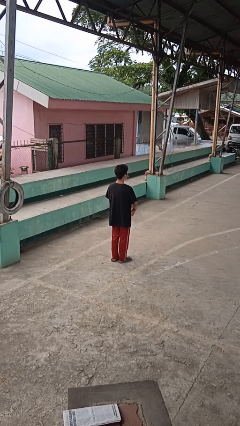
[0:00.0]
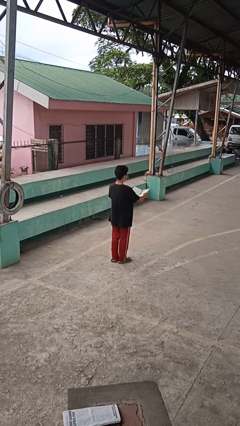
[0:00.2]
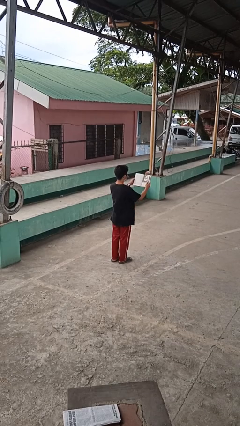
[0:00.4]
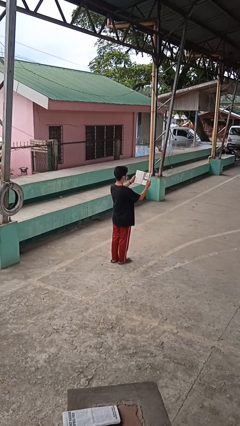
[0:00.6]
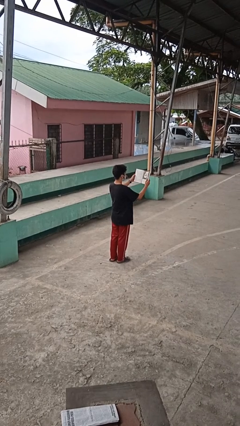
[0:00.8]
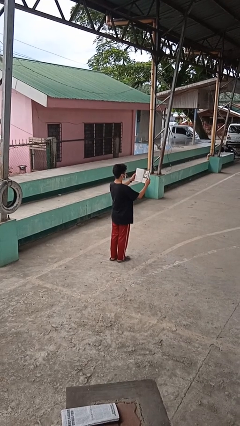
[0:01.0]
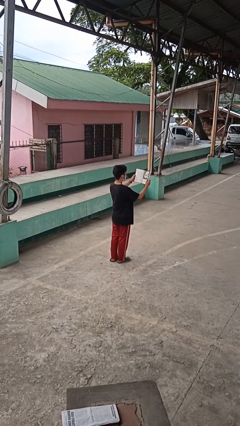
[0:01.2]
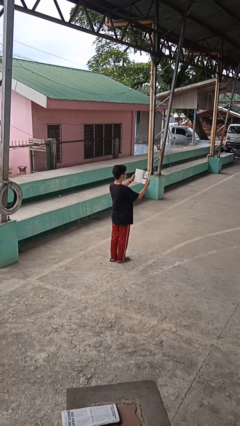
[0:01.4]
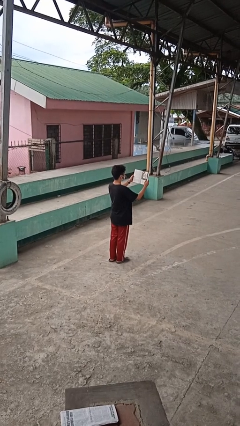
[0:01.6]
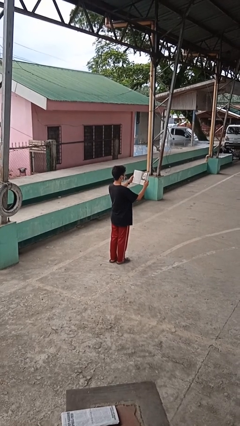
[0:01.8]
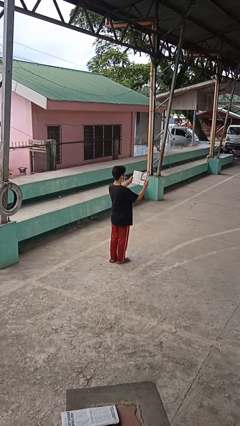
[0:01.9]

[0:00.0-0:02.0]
person reads book

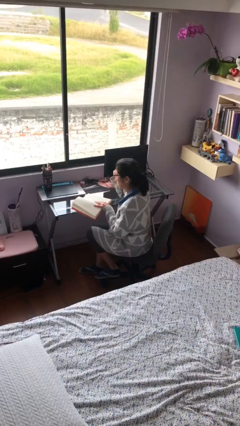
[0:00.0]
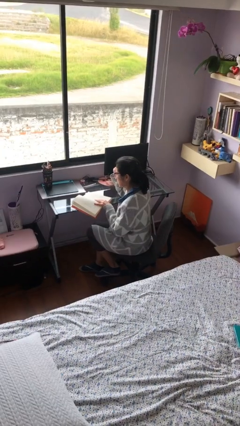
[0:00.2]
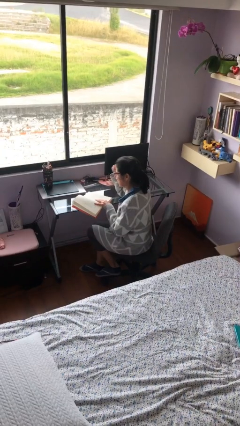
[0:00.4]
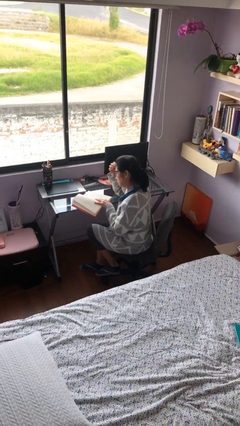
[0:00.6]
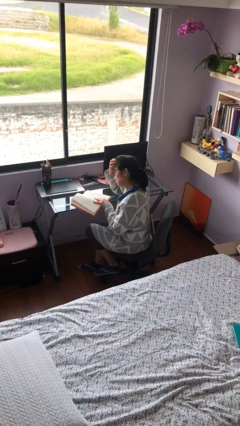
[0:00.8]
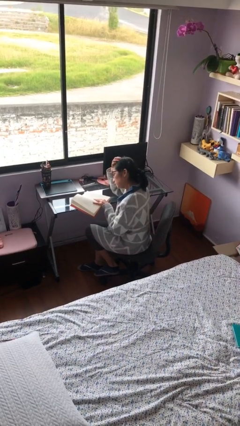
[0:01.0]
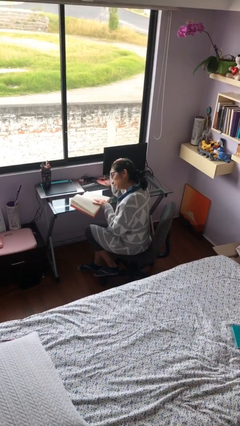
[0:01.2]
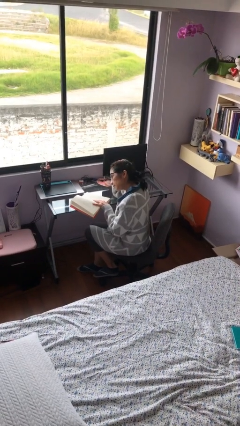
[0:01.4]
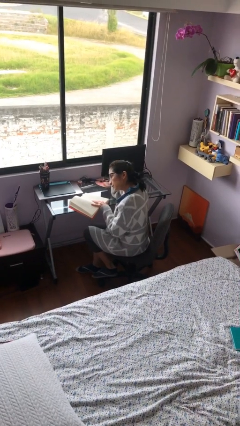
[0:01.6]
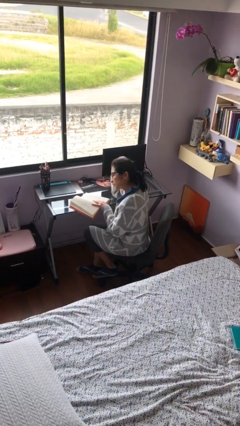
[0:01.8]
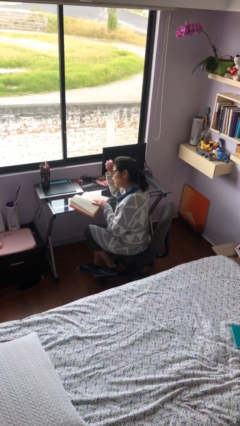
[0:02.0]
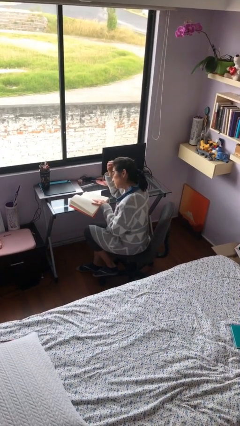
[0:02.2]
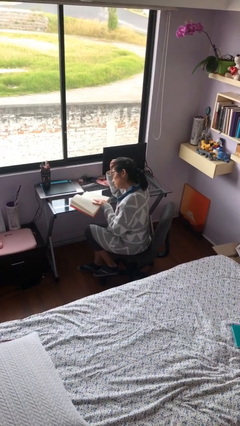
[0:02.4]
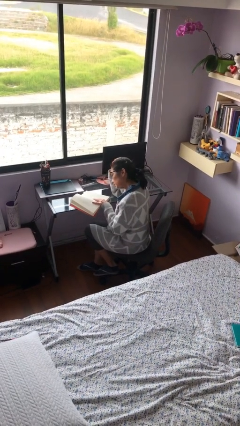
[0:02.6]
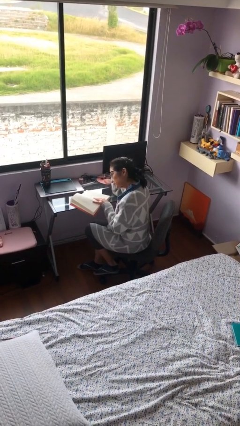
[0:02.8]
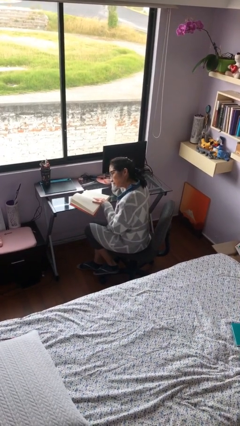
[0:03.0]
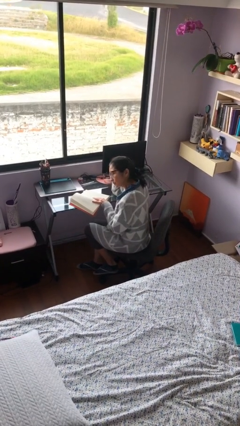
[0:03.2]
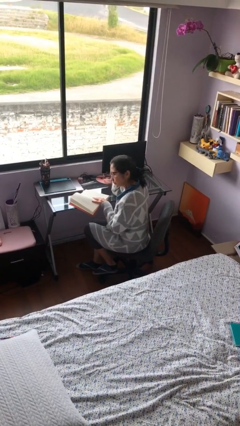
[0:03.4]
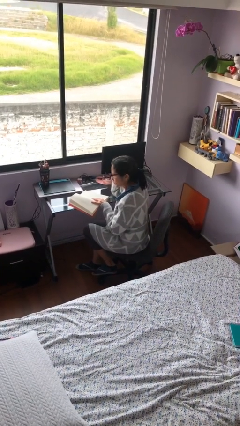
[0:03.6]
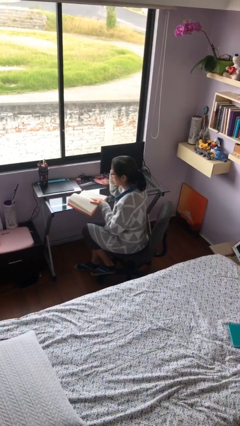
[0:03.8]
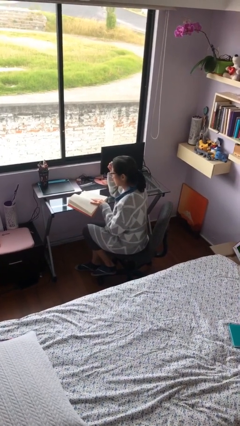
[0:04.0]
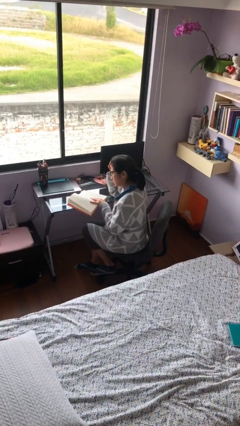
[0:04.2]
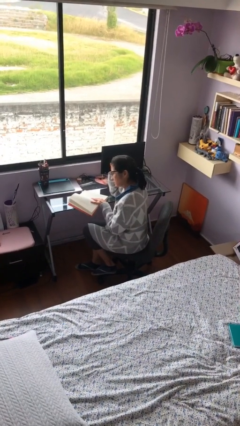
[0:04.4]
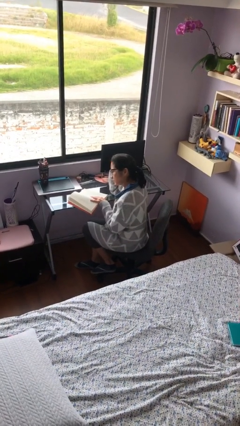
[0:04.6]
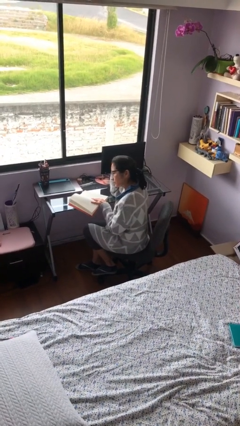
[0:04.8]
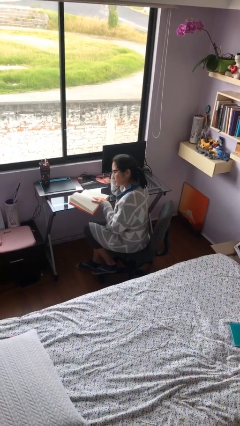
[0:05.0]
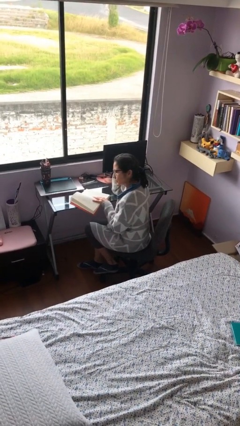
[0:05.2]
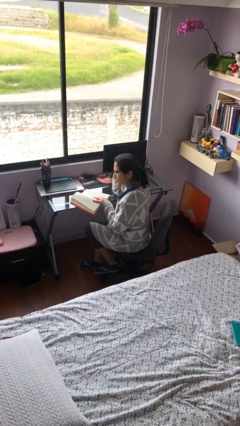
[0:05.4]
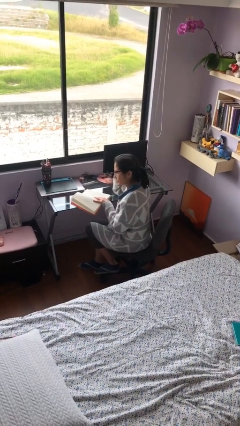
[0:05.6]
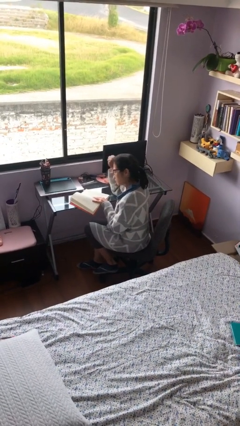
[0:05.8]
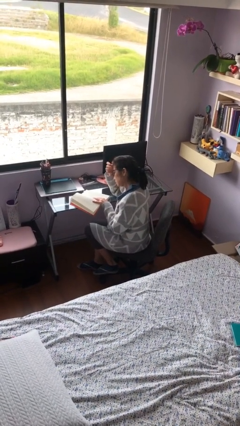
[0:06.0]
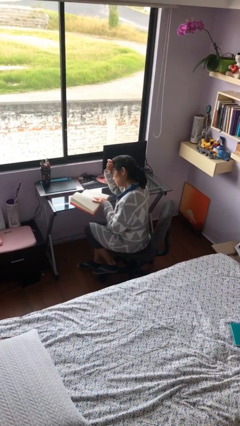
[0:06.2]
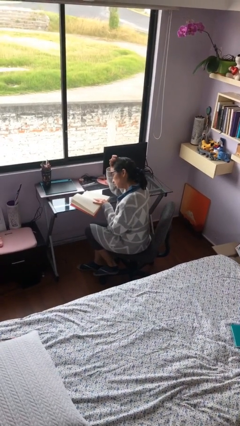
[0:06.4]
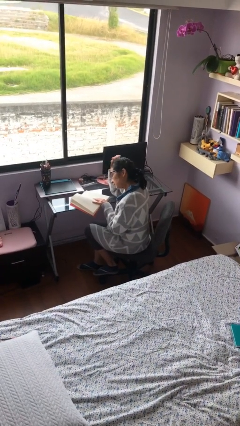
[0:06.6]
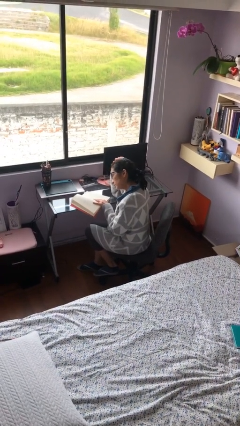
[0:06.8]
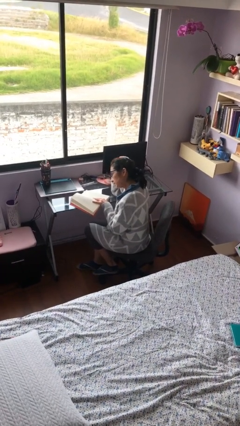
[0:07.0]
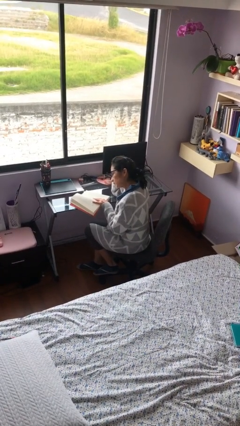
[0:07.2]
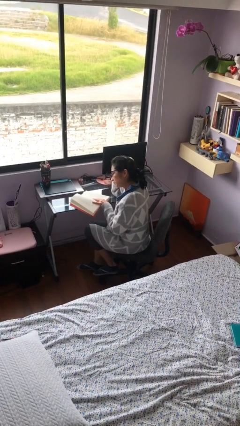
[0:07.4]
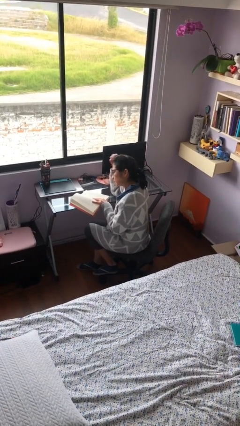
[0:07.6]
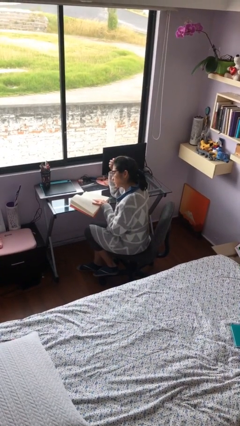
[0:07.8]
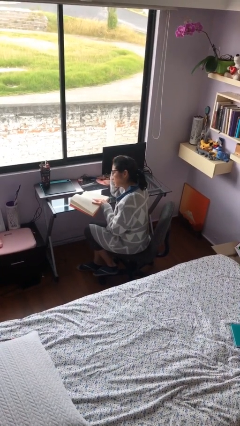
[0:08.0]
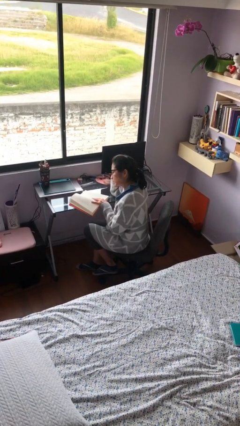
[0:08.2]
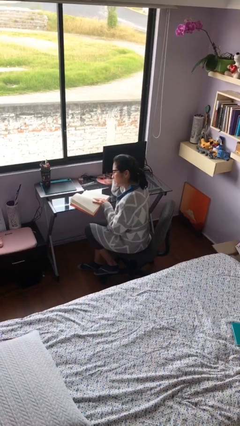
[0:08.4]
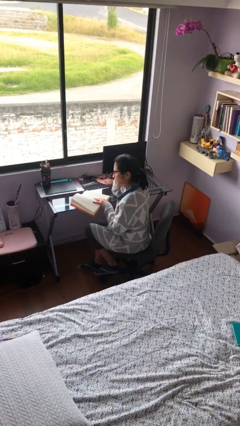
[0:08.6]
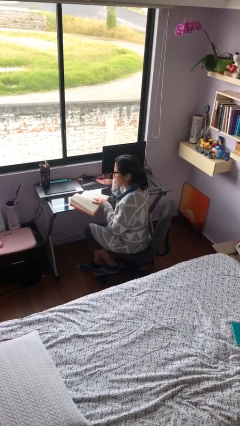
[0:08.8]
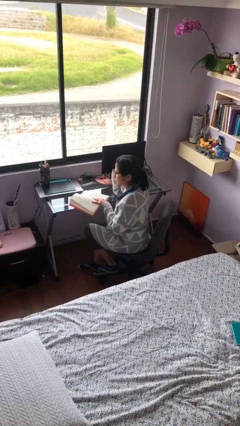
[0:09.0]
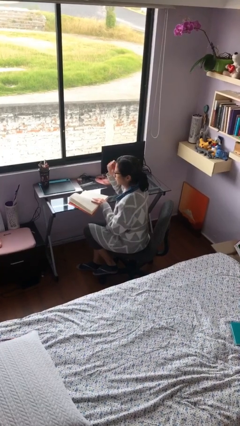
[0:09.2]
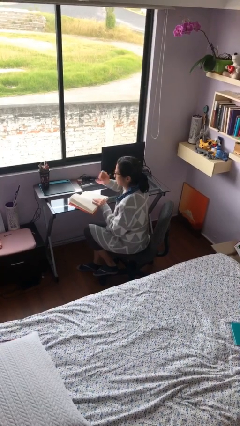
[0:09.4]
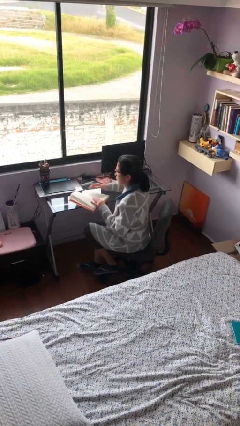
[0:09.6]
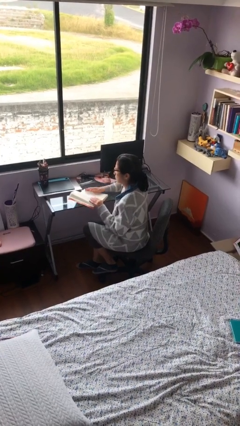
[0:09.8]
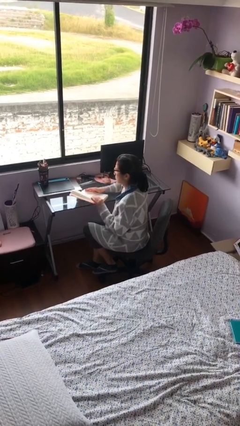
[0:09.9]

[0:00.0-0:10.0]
person reads document

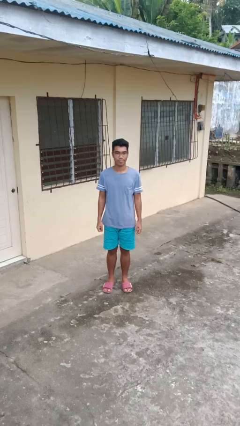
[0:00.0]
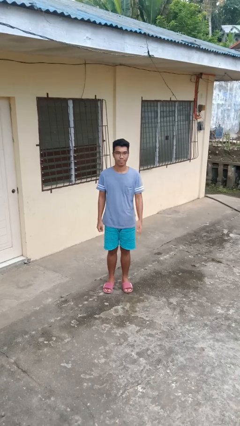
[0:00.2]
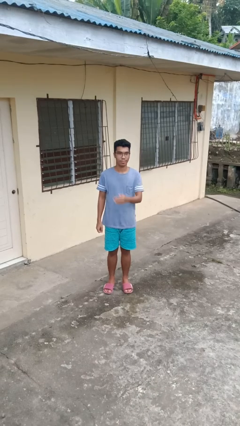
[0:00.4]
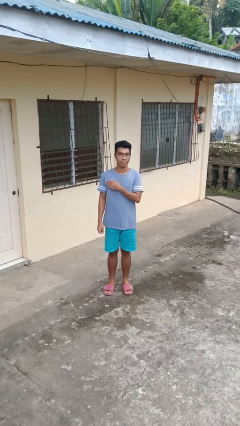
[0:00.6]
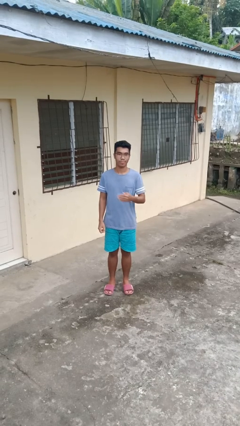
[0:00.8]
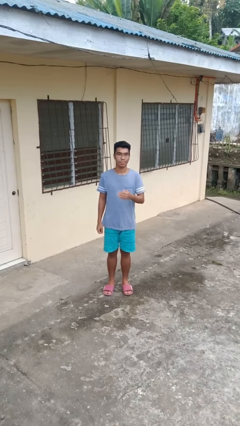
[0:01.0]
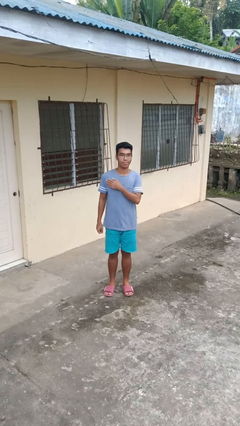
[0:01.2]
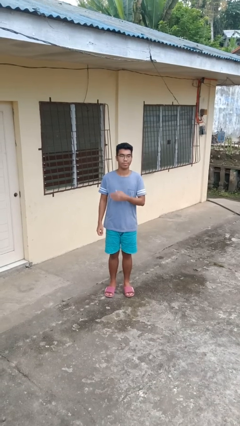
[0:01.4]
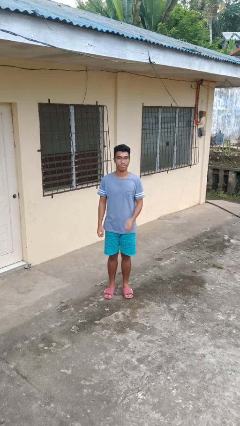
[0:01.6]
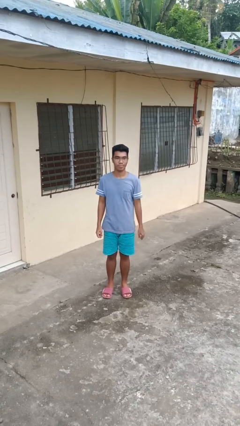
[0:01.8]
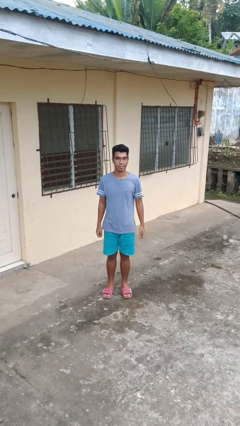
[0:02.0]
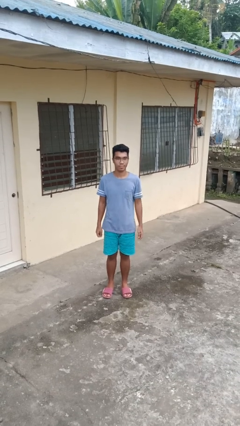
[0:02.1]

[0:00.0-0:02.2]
person drums on chest

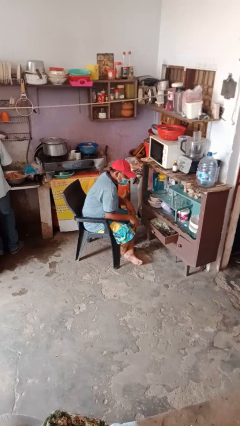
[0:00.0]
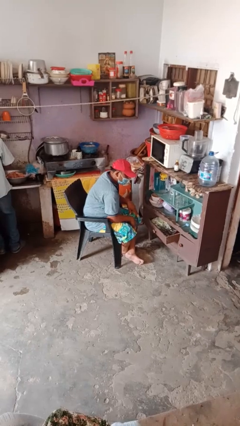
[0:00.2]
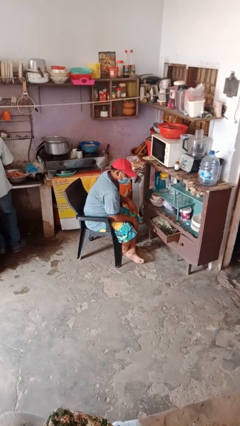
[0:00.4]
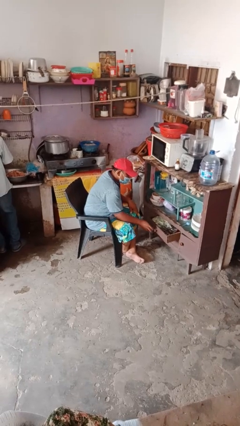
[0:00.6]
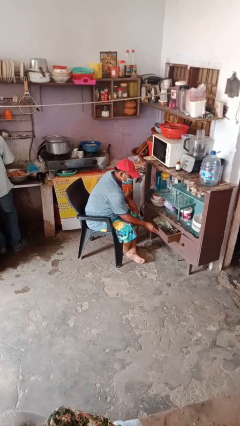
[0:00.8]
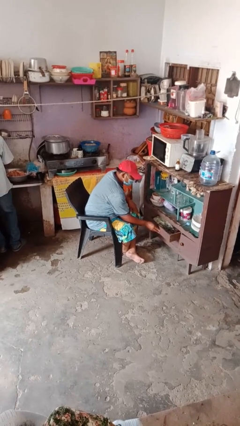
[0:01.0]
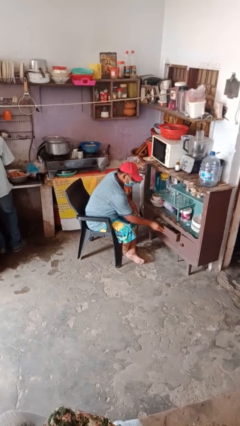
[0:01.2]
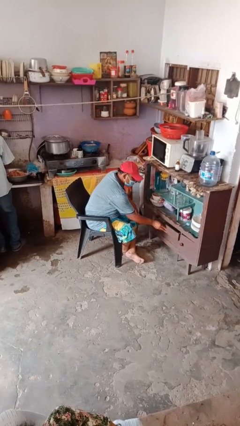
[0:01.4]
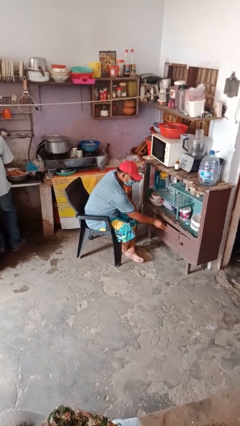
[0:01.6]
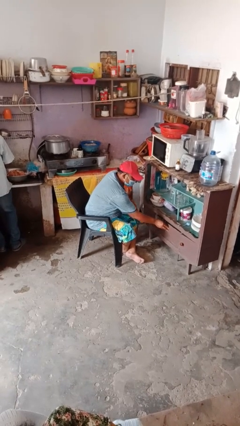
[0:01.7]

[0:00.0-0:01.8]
person closes dresser drawer

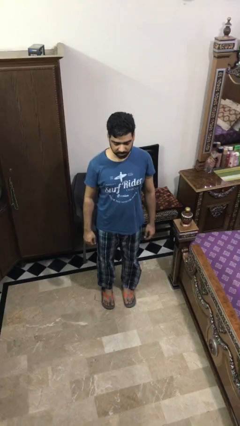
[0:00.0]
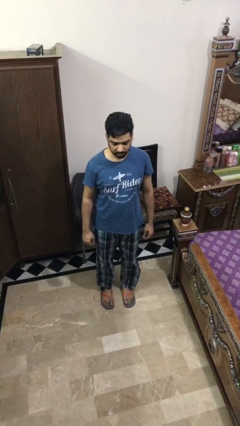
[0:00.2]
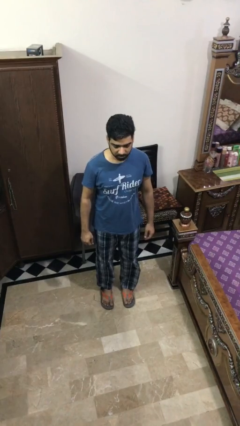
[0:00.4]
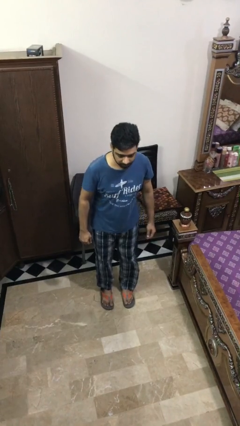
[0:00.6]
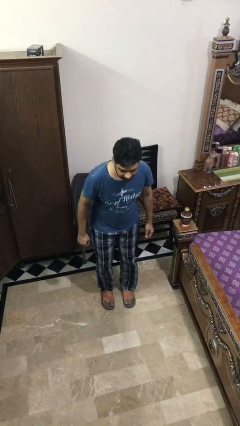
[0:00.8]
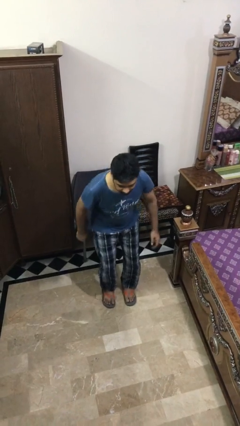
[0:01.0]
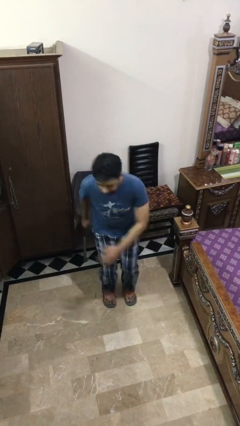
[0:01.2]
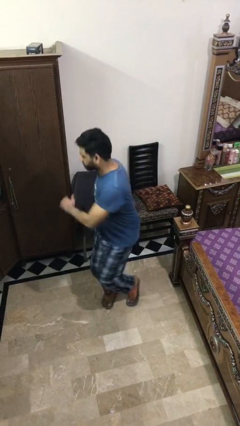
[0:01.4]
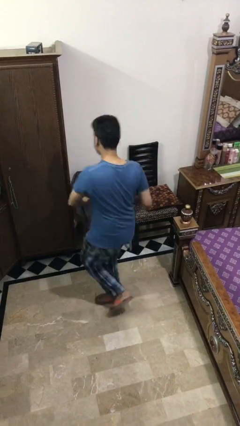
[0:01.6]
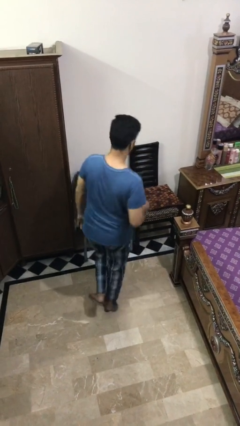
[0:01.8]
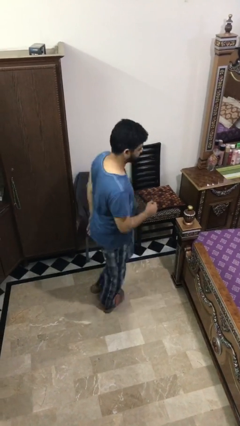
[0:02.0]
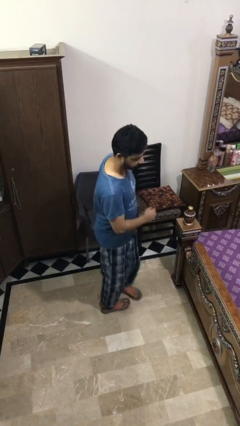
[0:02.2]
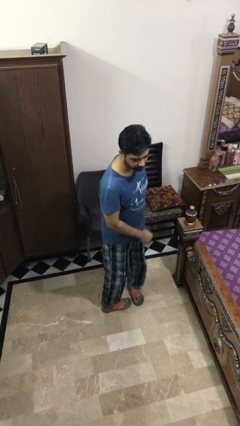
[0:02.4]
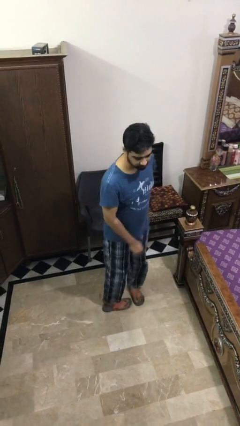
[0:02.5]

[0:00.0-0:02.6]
person twirls
